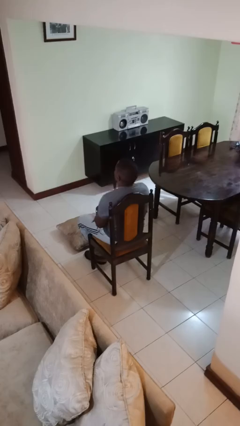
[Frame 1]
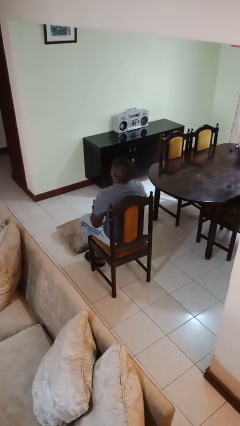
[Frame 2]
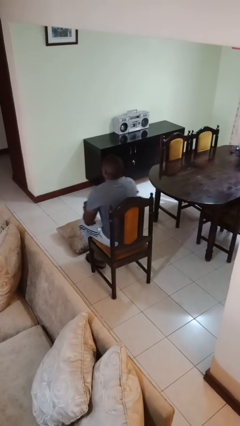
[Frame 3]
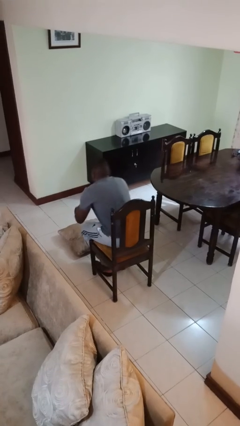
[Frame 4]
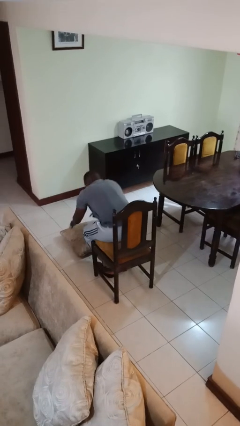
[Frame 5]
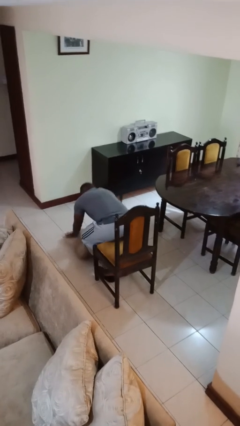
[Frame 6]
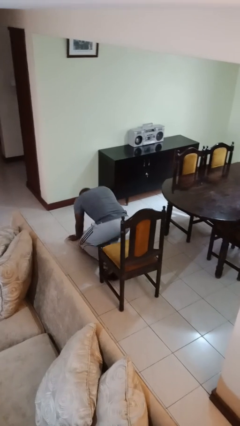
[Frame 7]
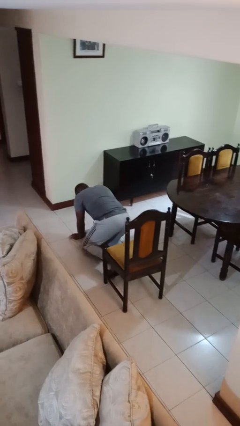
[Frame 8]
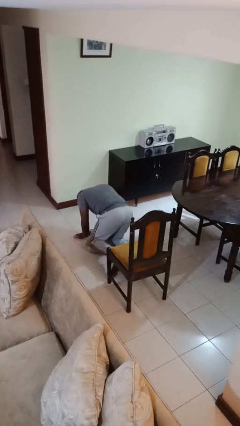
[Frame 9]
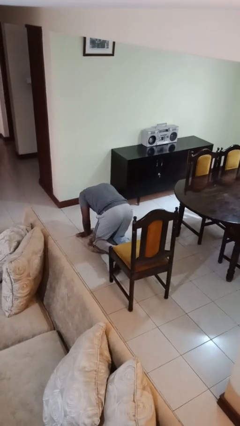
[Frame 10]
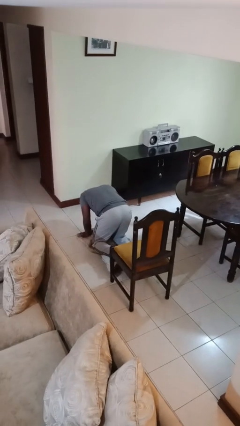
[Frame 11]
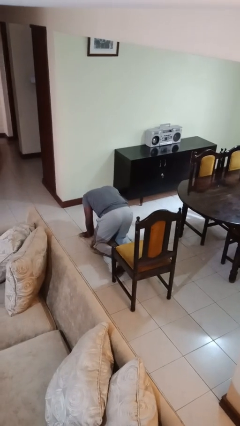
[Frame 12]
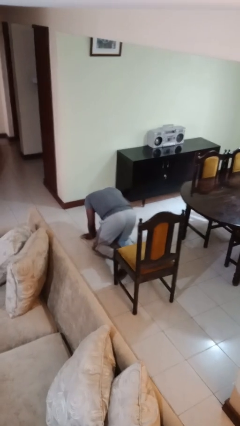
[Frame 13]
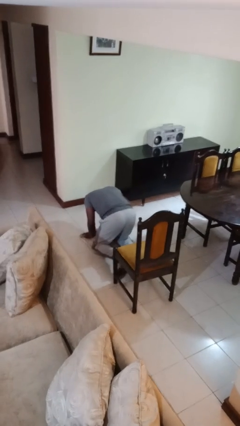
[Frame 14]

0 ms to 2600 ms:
person falls from chair

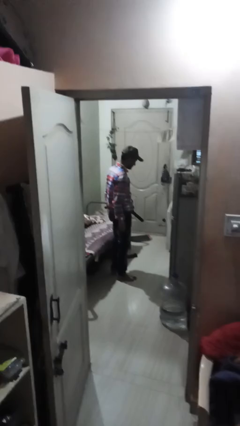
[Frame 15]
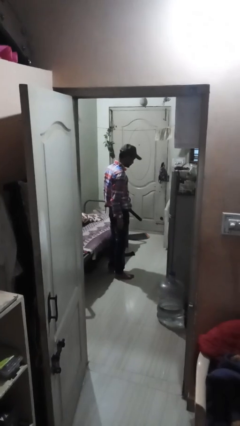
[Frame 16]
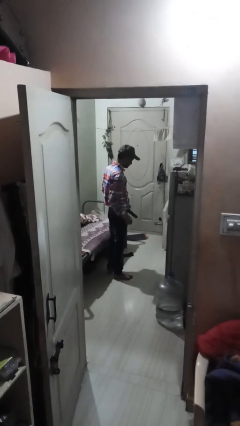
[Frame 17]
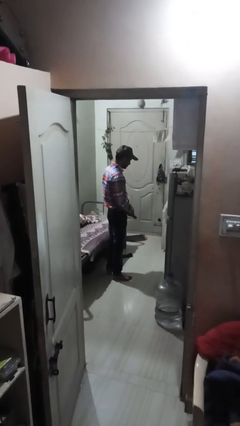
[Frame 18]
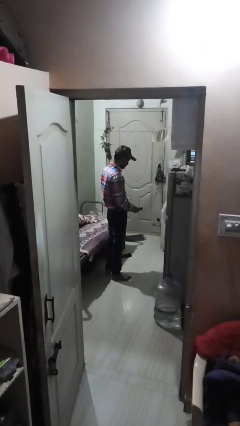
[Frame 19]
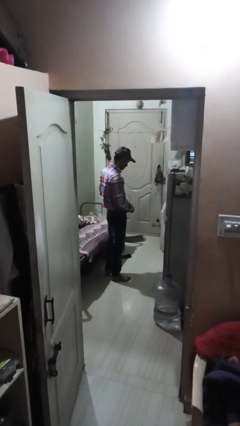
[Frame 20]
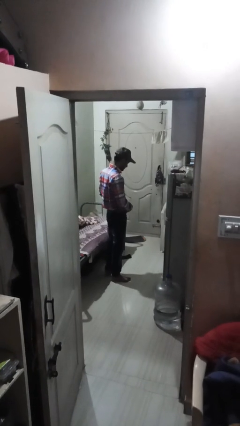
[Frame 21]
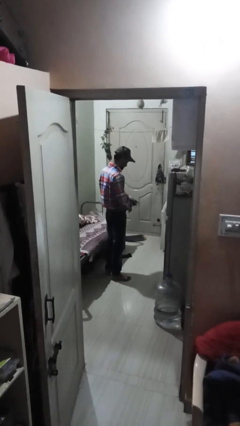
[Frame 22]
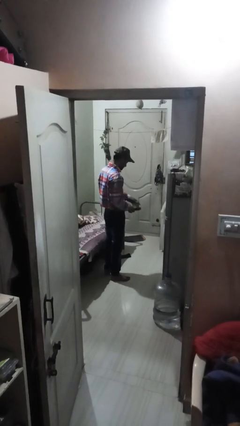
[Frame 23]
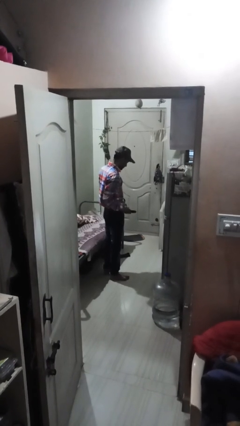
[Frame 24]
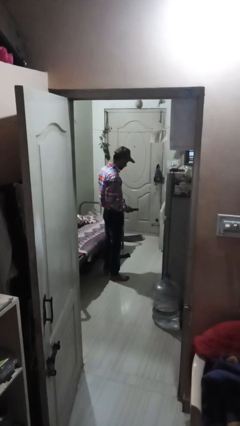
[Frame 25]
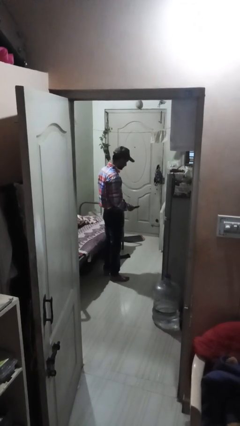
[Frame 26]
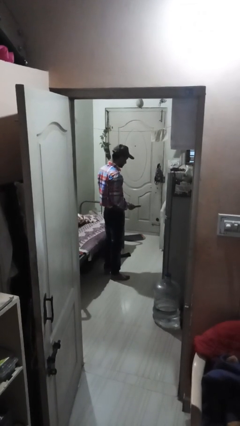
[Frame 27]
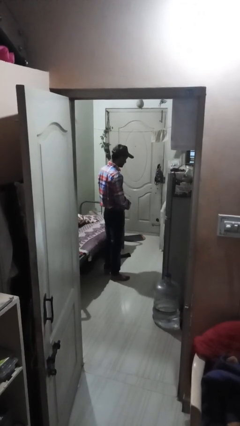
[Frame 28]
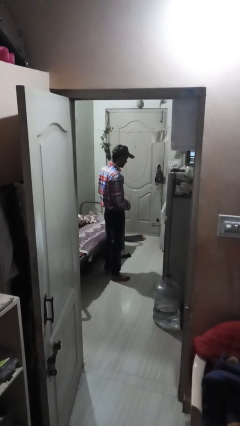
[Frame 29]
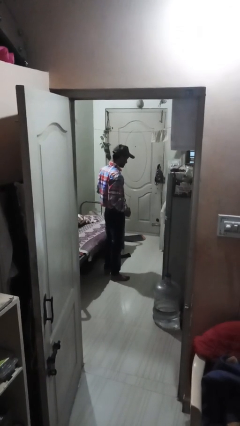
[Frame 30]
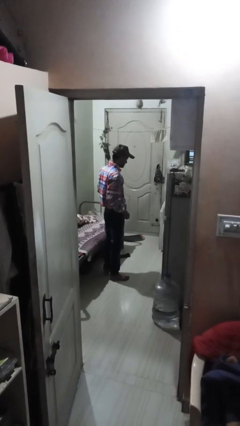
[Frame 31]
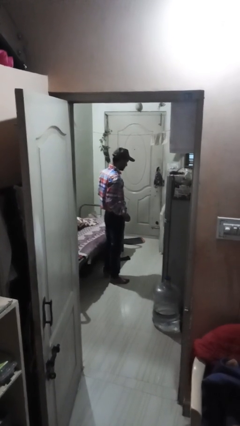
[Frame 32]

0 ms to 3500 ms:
person puts on belt

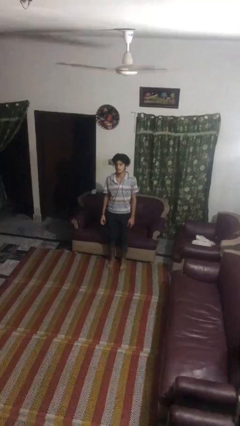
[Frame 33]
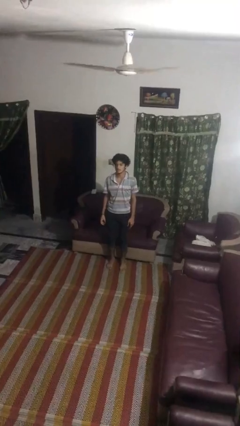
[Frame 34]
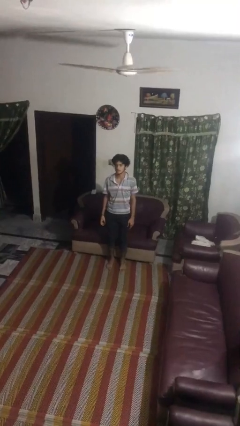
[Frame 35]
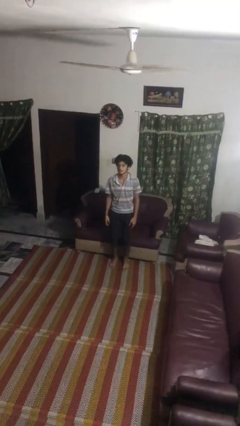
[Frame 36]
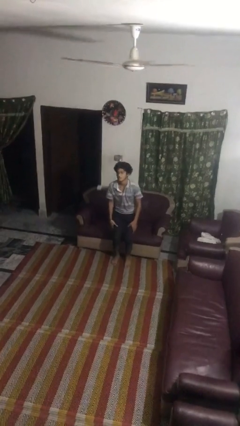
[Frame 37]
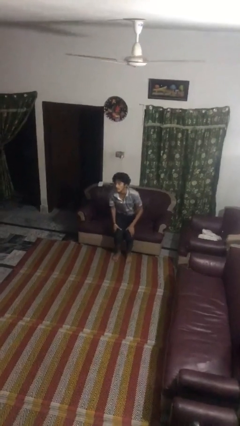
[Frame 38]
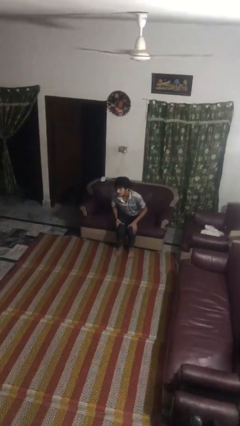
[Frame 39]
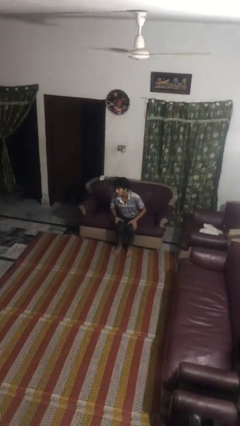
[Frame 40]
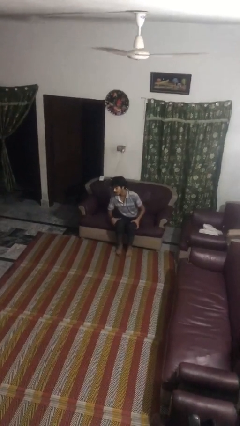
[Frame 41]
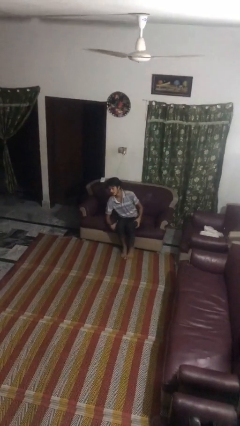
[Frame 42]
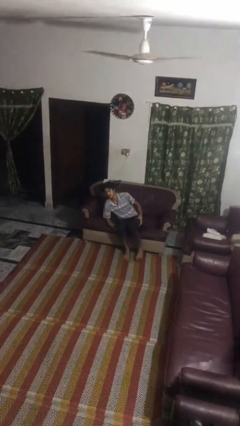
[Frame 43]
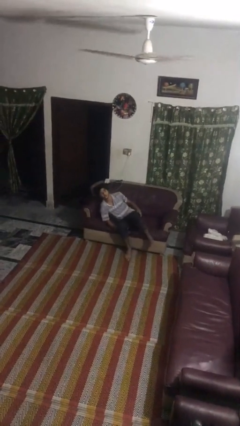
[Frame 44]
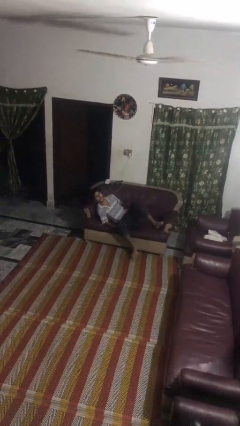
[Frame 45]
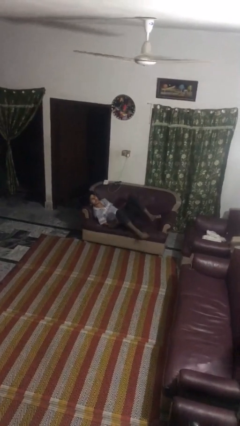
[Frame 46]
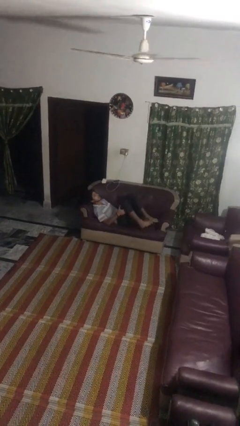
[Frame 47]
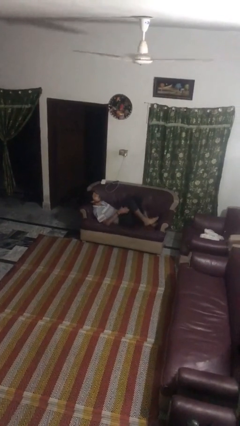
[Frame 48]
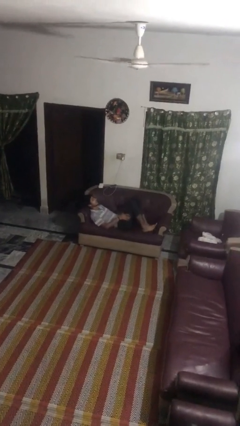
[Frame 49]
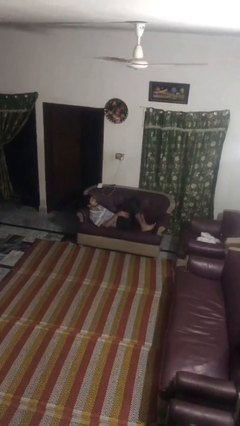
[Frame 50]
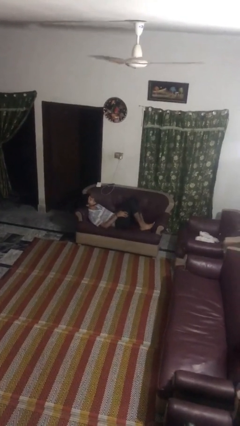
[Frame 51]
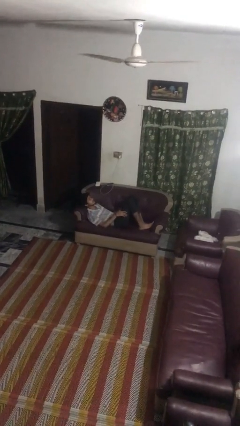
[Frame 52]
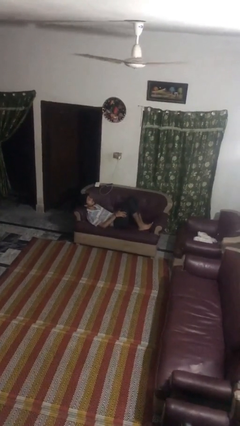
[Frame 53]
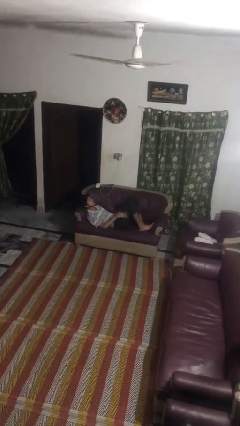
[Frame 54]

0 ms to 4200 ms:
person lies down on couch

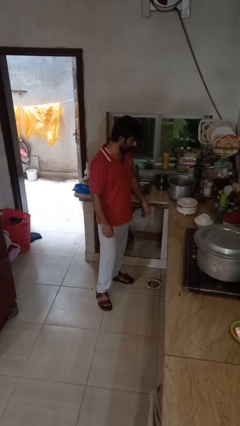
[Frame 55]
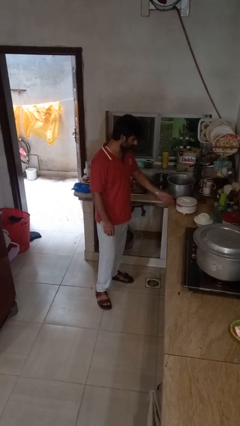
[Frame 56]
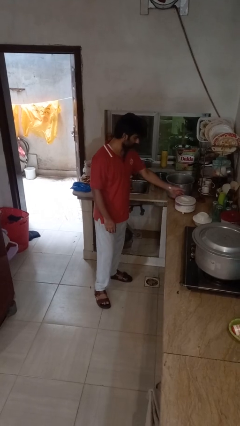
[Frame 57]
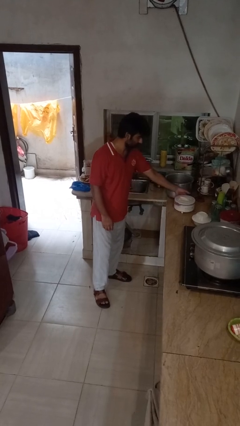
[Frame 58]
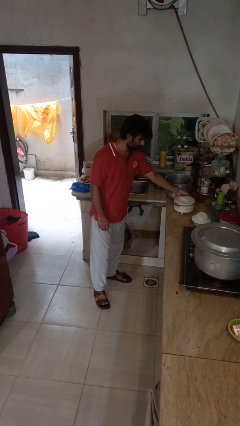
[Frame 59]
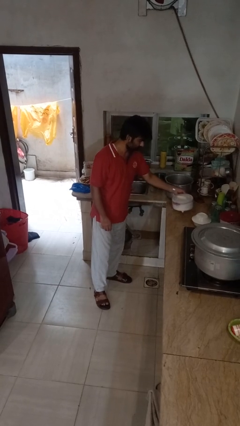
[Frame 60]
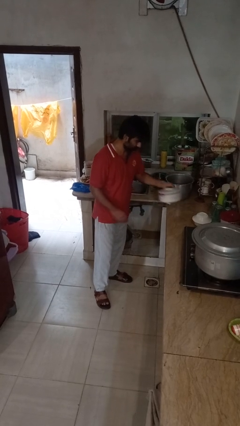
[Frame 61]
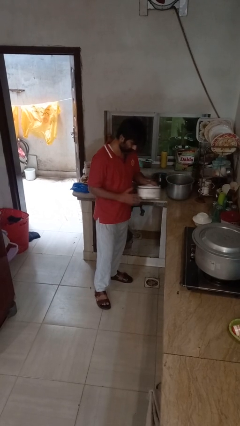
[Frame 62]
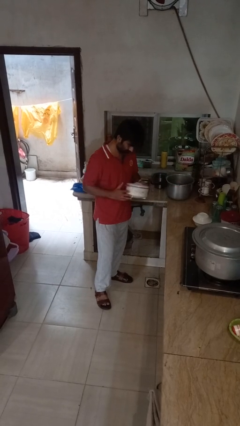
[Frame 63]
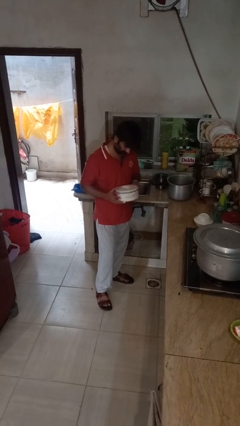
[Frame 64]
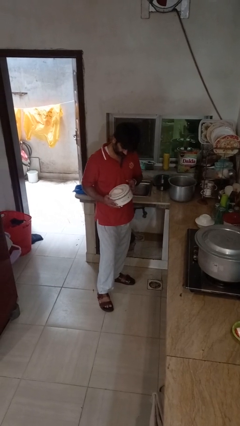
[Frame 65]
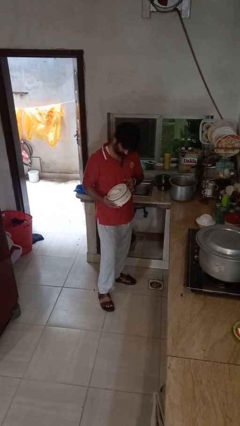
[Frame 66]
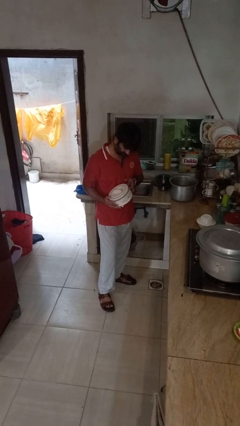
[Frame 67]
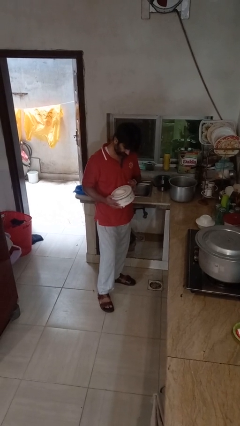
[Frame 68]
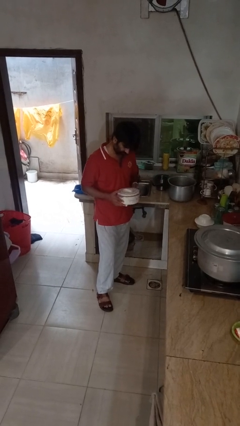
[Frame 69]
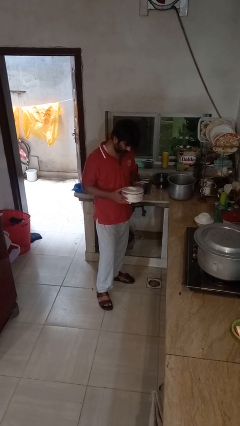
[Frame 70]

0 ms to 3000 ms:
person picks up object from countertop

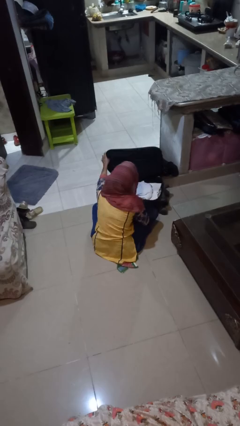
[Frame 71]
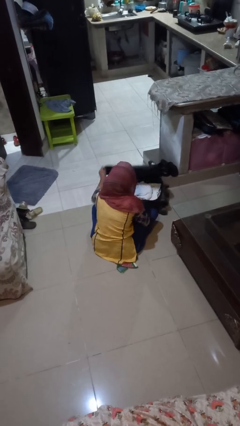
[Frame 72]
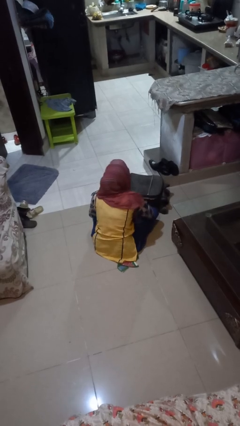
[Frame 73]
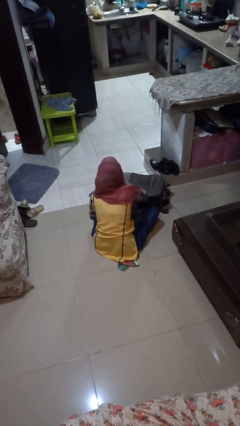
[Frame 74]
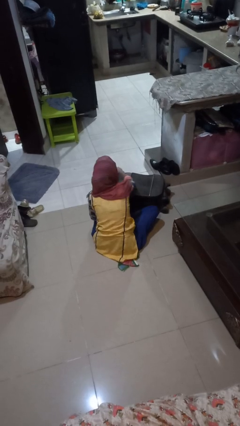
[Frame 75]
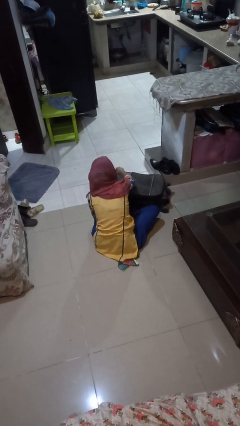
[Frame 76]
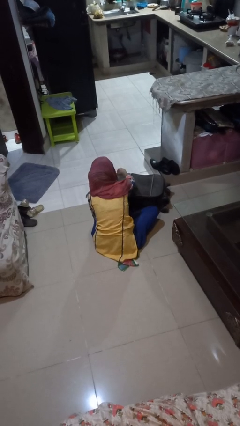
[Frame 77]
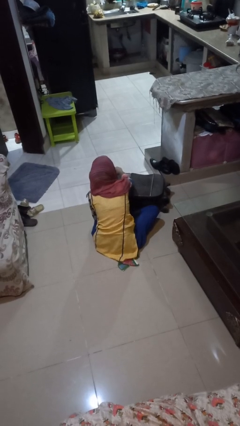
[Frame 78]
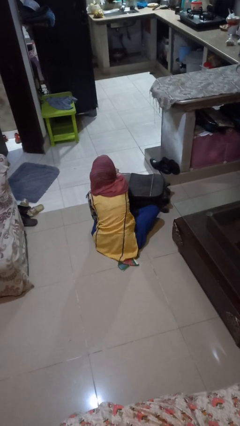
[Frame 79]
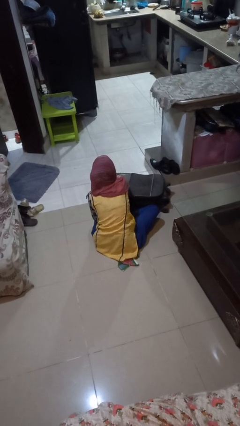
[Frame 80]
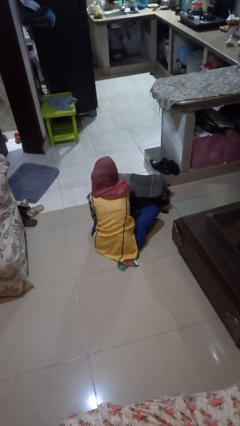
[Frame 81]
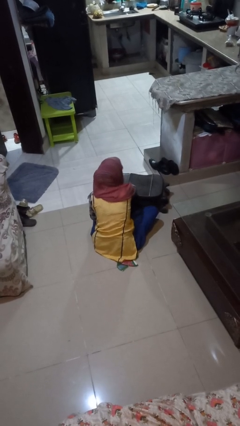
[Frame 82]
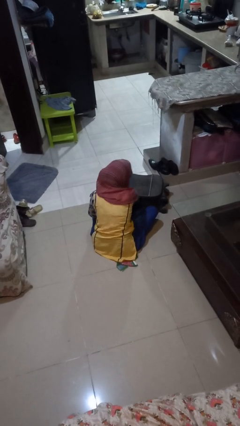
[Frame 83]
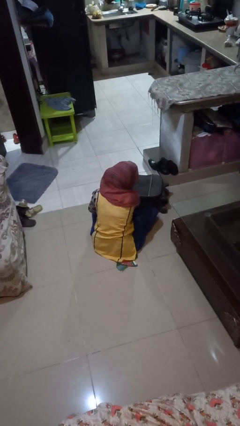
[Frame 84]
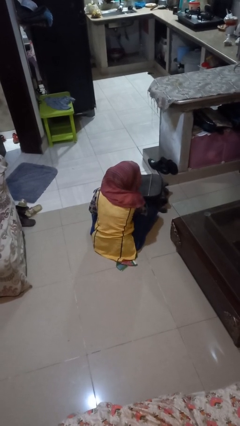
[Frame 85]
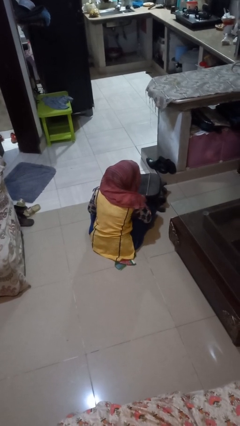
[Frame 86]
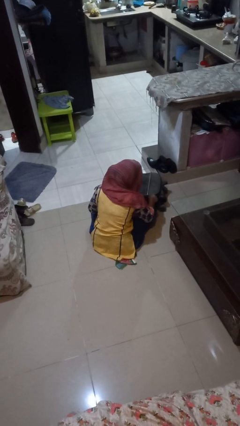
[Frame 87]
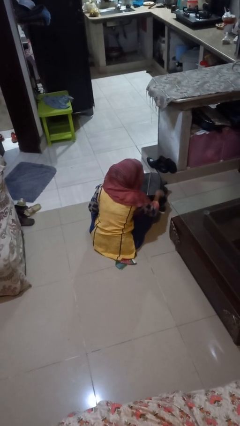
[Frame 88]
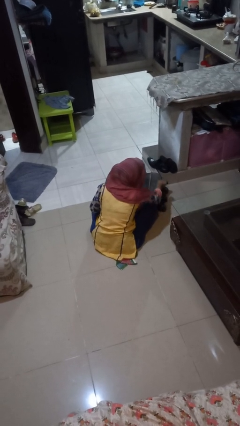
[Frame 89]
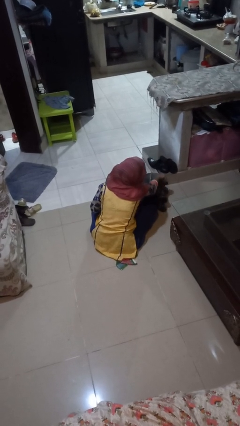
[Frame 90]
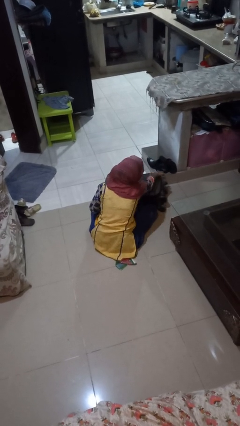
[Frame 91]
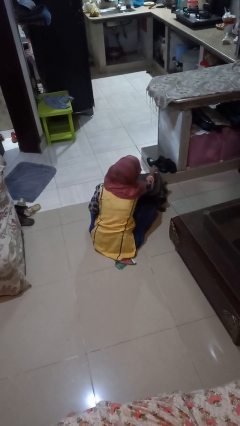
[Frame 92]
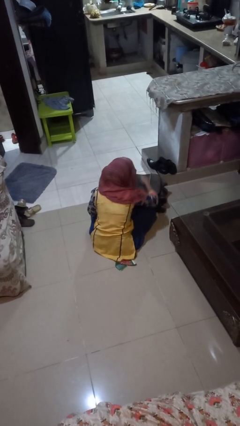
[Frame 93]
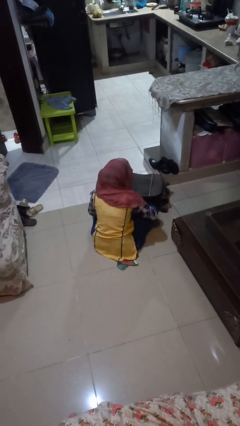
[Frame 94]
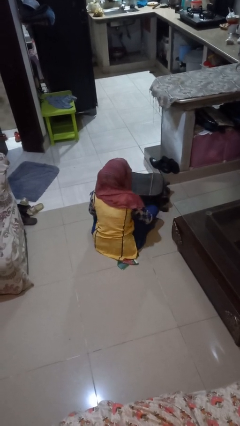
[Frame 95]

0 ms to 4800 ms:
person closes suitcase
